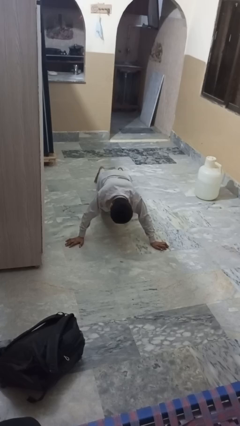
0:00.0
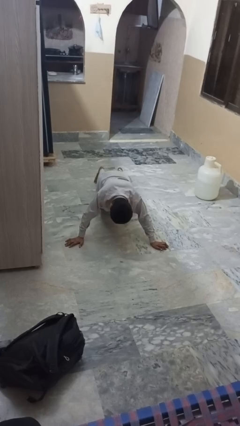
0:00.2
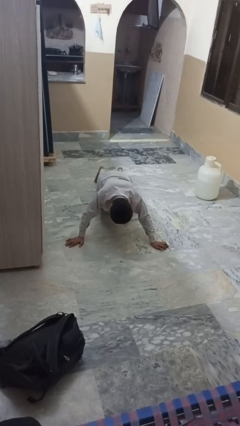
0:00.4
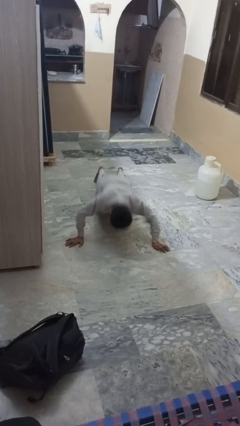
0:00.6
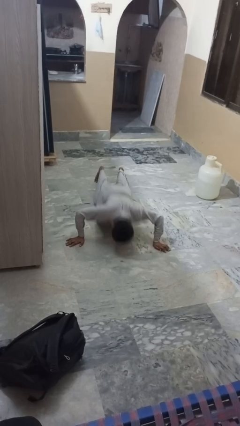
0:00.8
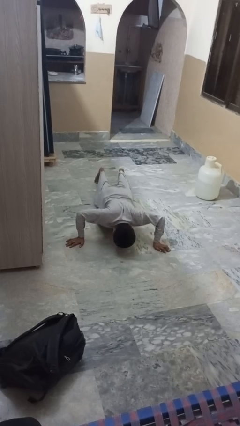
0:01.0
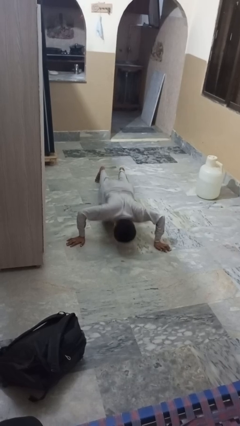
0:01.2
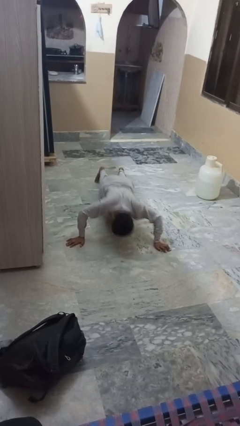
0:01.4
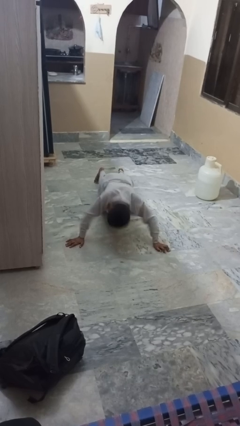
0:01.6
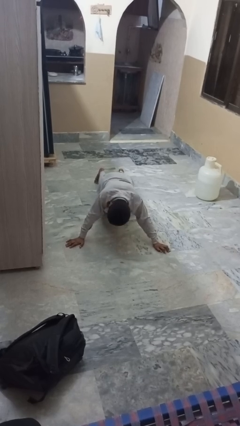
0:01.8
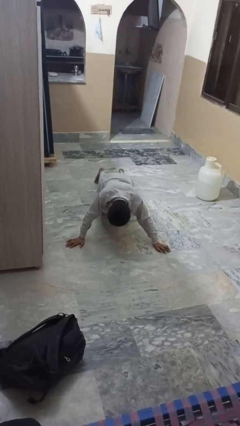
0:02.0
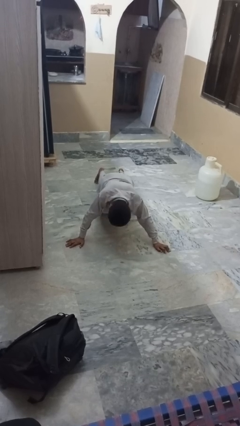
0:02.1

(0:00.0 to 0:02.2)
person exercises with pushup

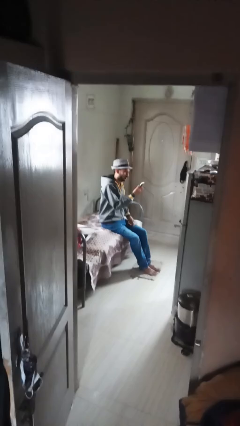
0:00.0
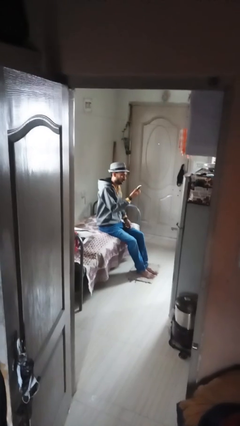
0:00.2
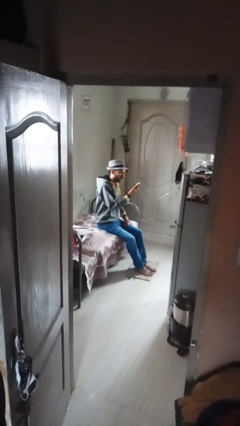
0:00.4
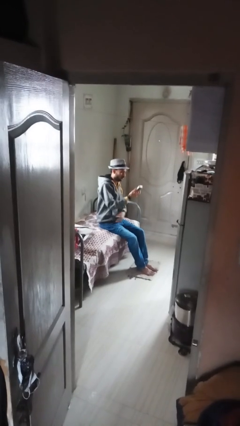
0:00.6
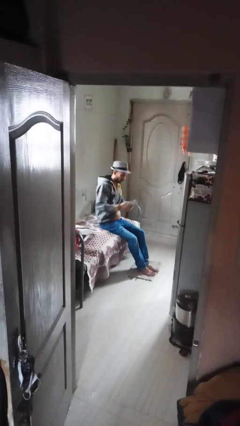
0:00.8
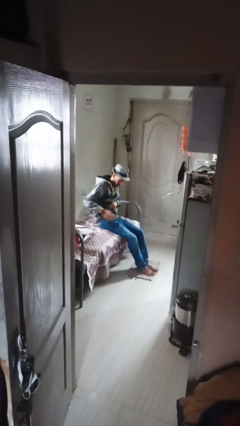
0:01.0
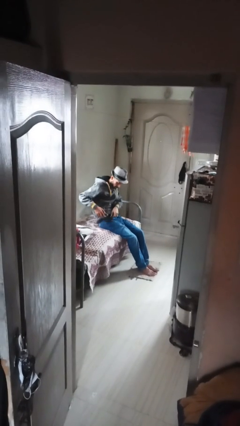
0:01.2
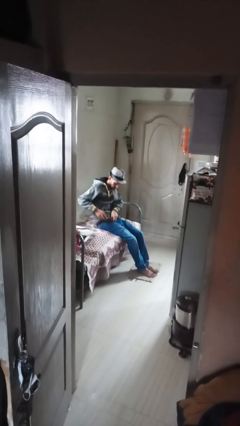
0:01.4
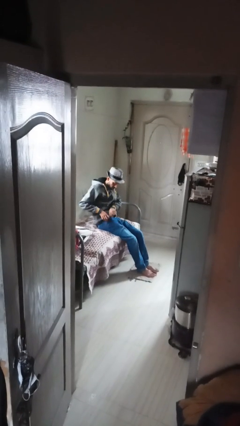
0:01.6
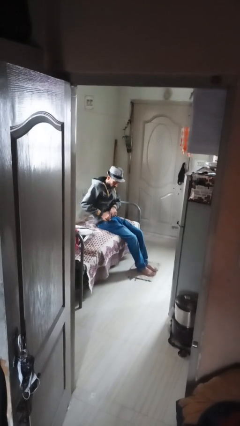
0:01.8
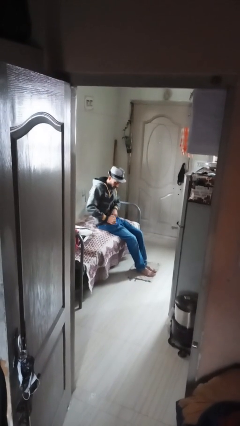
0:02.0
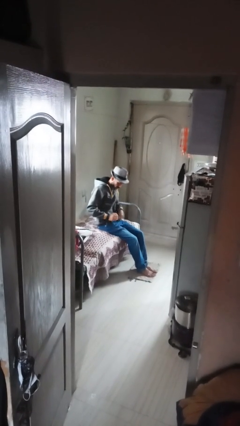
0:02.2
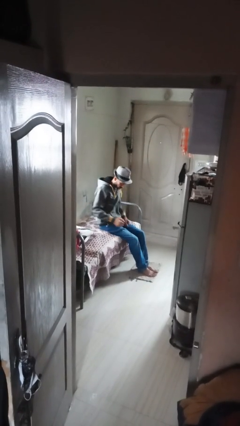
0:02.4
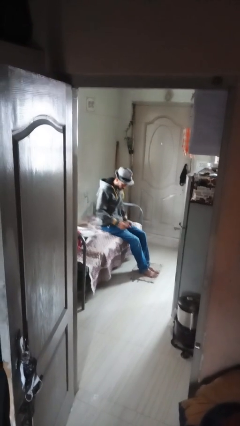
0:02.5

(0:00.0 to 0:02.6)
person puts phone into pocket

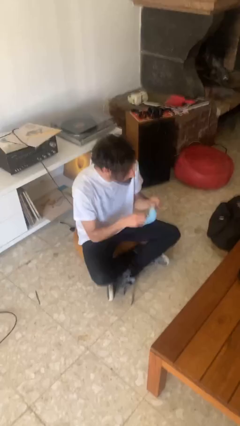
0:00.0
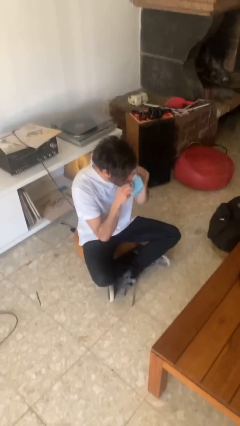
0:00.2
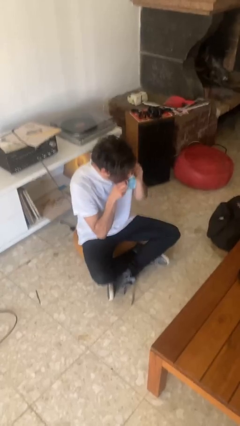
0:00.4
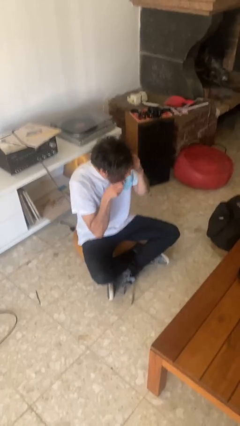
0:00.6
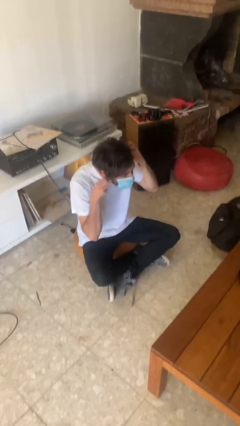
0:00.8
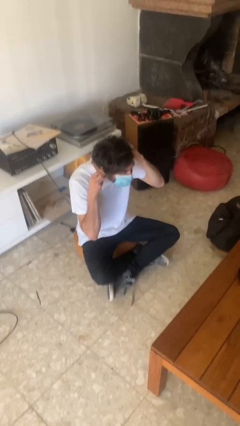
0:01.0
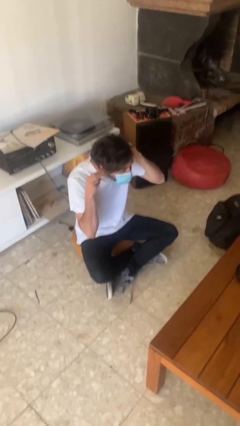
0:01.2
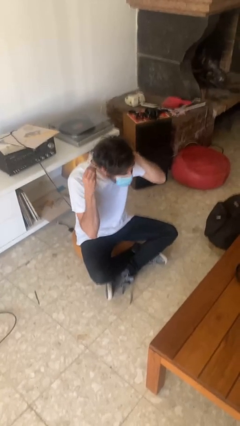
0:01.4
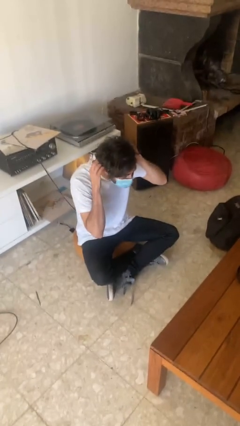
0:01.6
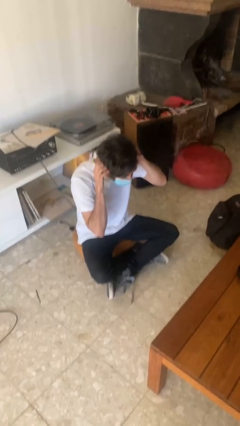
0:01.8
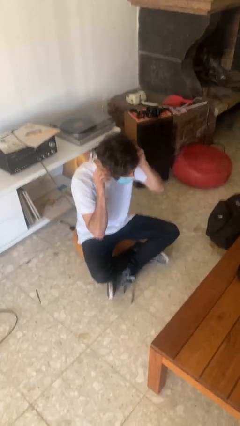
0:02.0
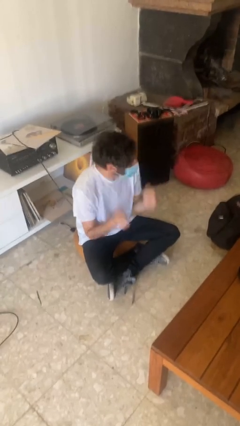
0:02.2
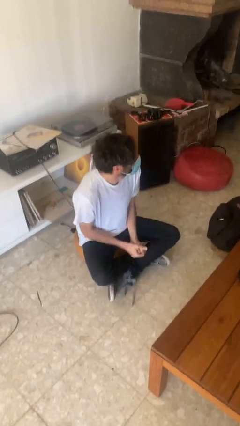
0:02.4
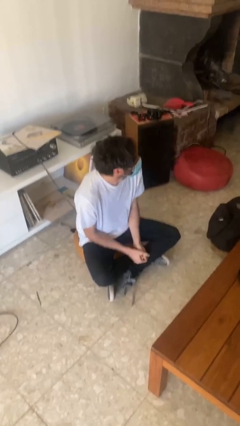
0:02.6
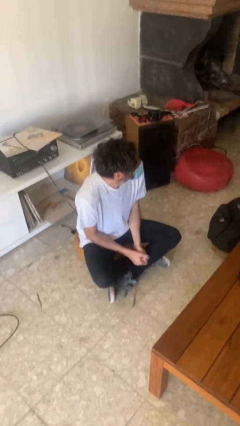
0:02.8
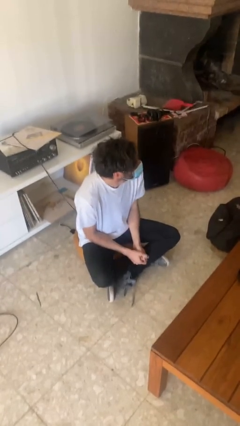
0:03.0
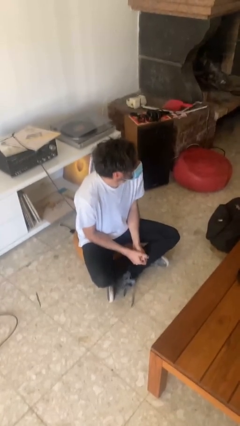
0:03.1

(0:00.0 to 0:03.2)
person puts on facemask

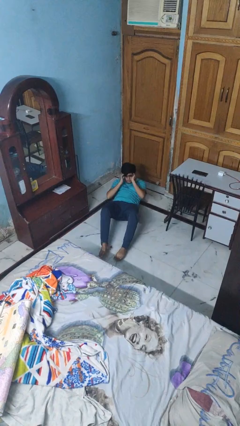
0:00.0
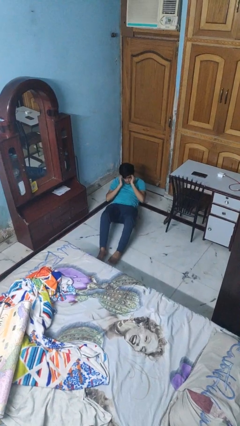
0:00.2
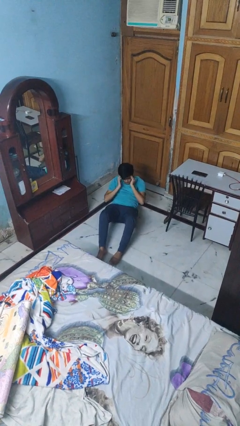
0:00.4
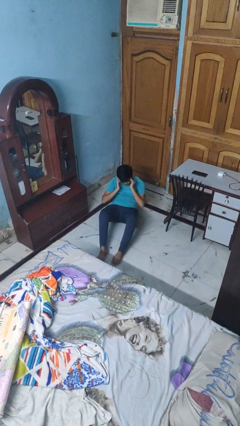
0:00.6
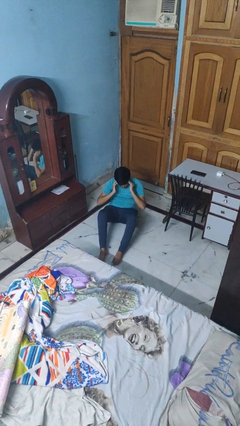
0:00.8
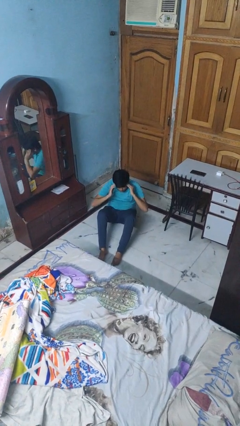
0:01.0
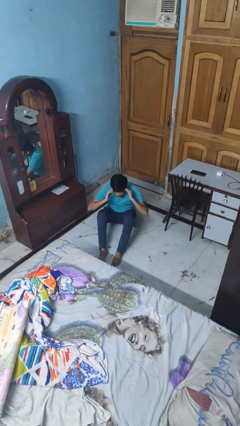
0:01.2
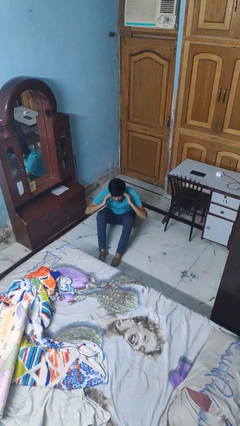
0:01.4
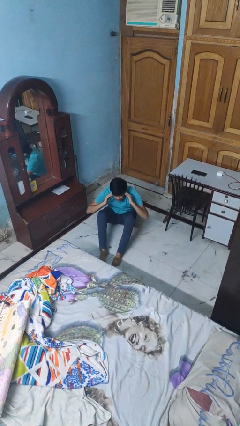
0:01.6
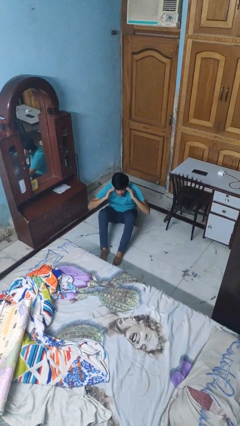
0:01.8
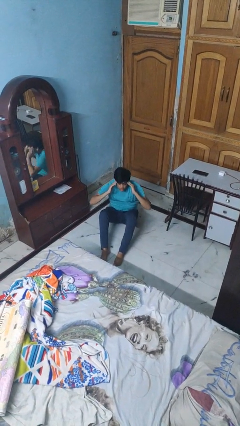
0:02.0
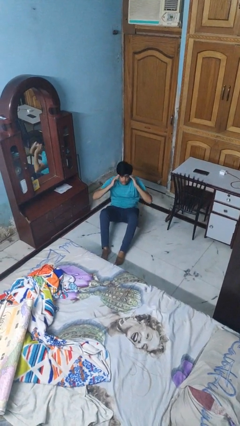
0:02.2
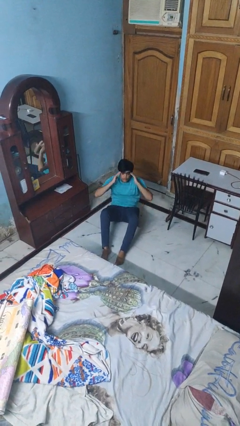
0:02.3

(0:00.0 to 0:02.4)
person exercises with situp

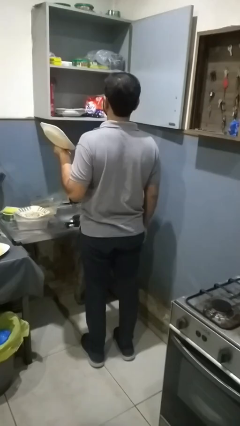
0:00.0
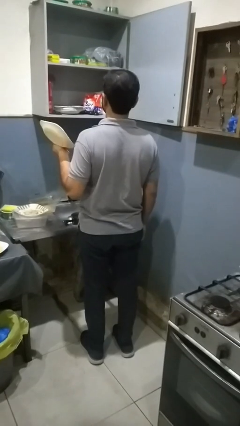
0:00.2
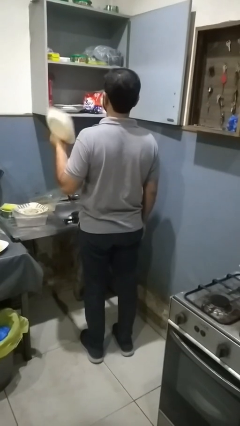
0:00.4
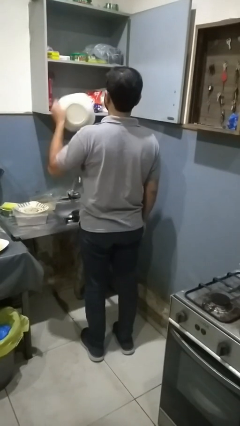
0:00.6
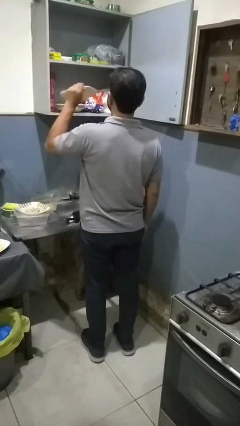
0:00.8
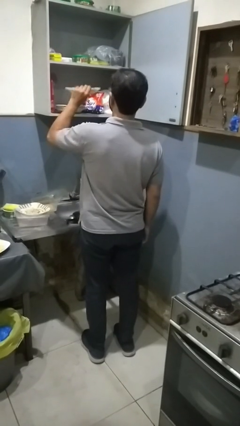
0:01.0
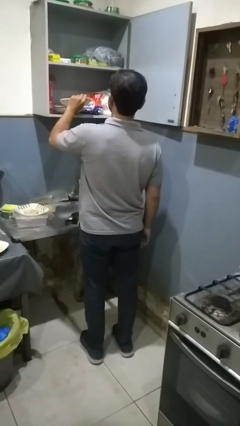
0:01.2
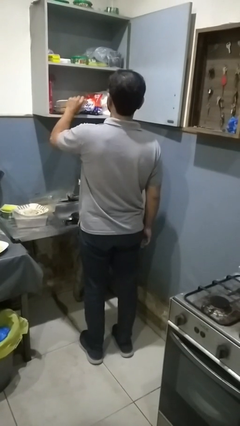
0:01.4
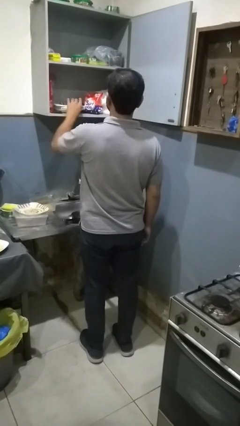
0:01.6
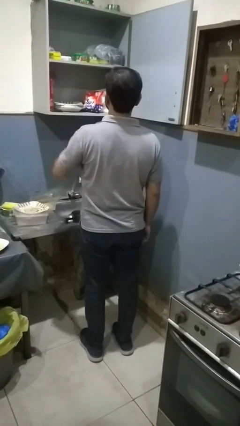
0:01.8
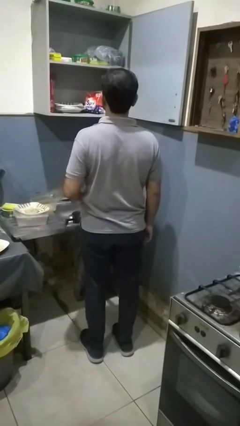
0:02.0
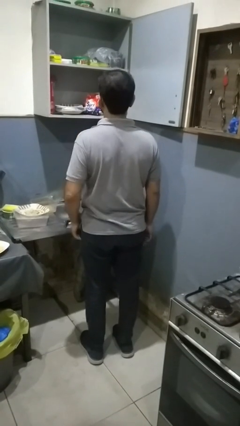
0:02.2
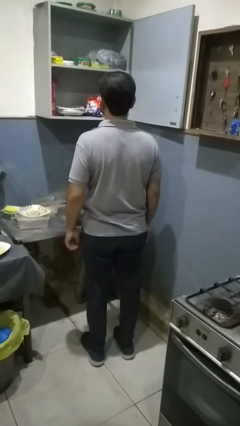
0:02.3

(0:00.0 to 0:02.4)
person puts object in cabinet

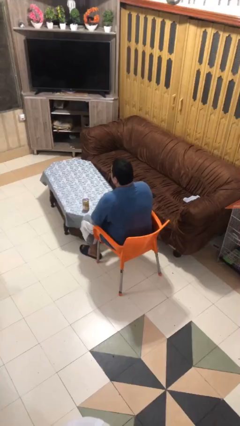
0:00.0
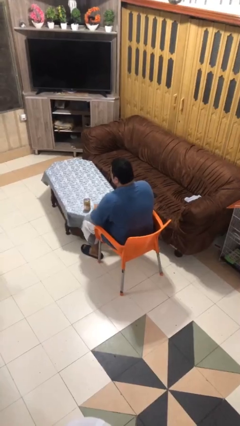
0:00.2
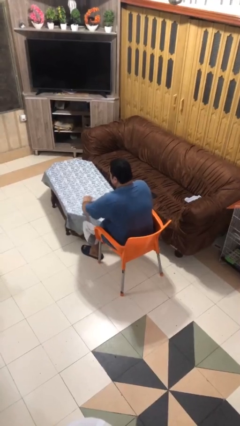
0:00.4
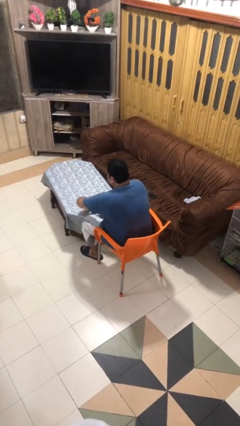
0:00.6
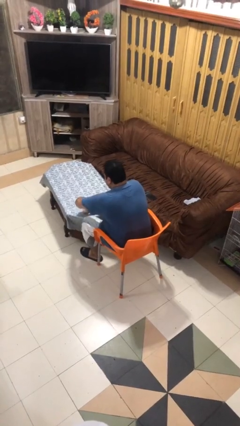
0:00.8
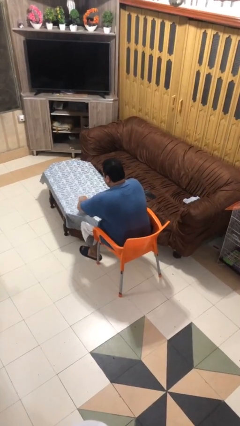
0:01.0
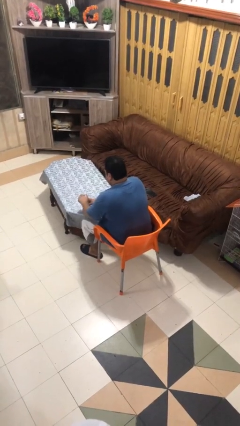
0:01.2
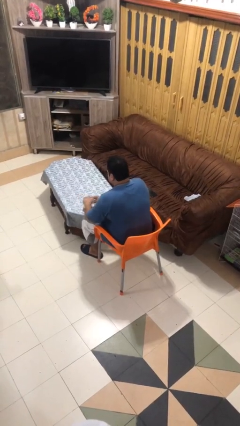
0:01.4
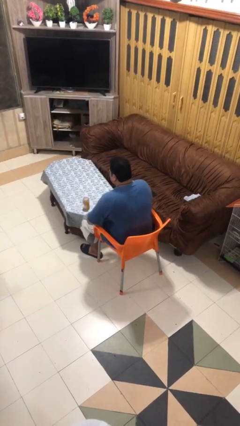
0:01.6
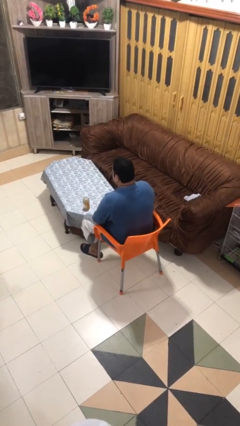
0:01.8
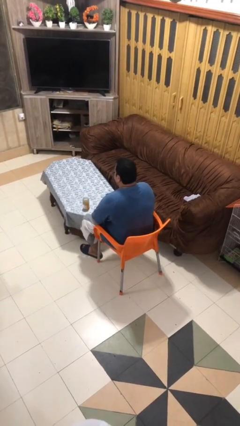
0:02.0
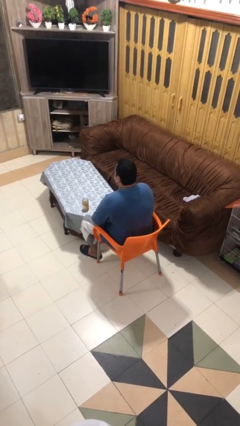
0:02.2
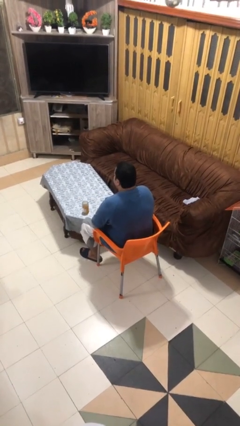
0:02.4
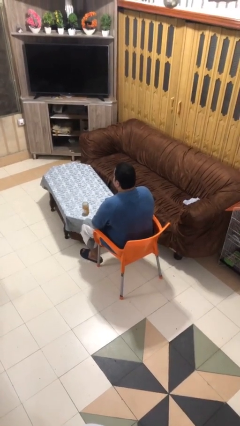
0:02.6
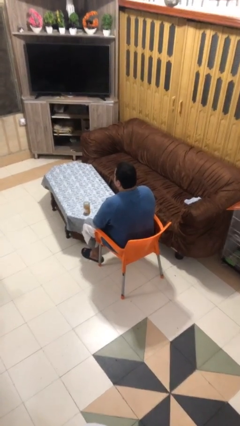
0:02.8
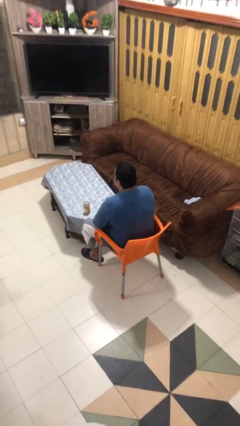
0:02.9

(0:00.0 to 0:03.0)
person opens jar

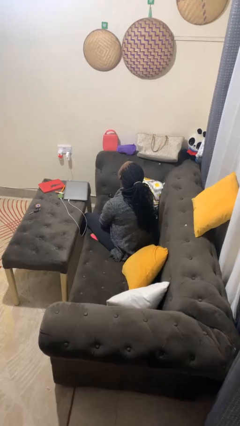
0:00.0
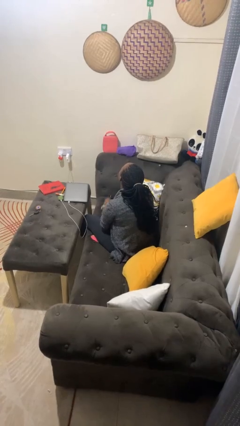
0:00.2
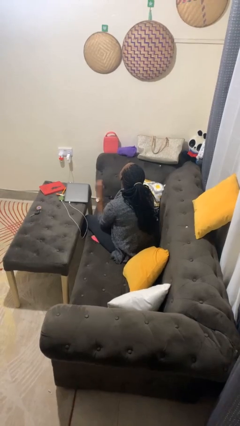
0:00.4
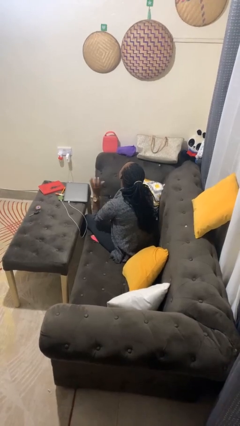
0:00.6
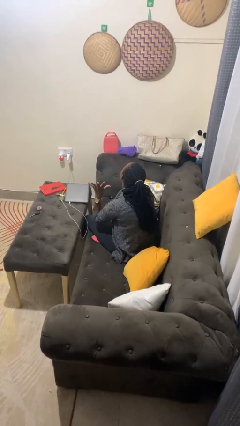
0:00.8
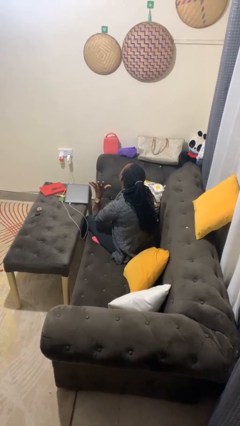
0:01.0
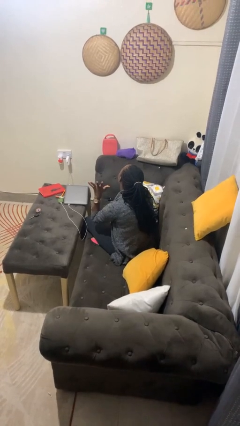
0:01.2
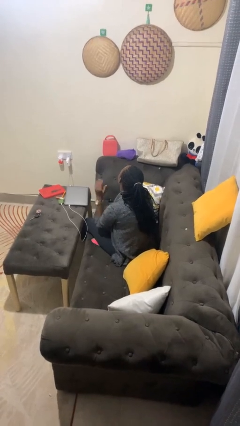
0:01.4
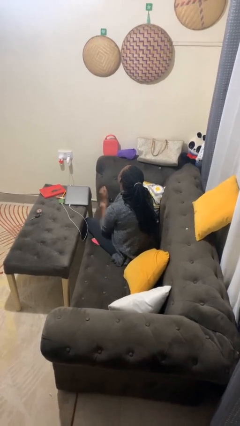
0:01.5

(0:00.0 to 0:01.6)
person gestures number five
